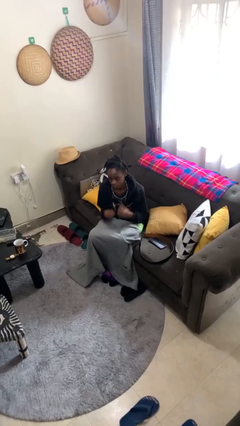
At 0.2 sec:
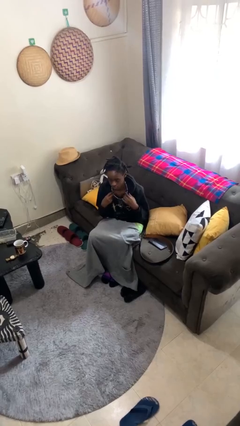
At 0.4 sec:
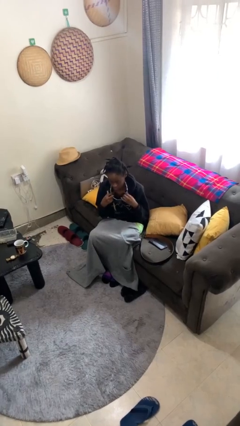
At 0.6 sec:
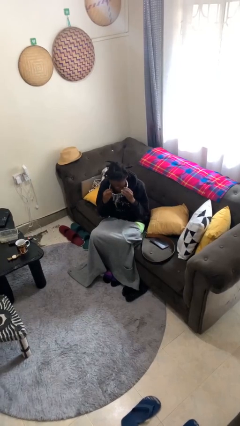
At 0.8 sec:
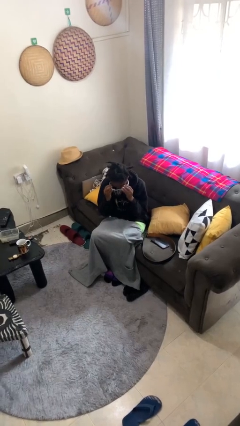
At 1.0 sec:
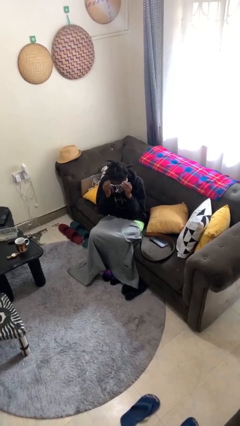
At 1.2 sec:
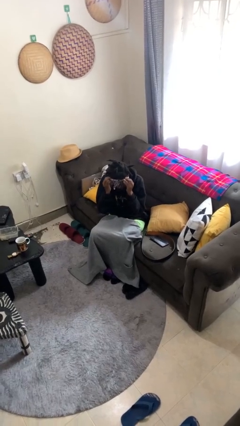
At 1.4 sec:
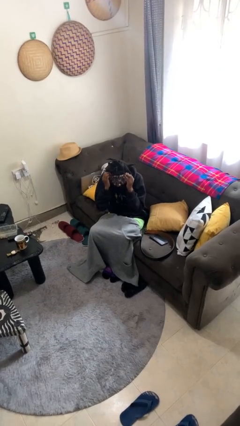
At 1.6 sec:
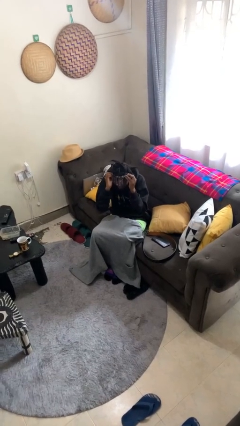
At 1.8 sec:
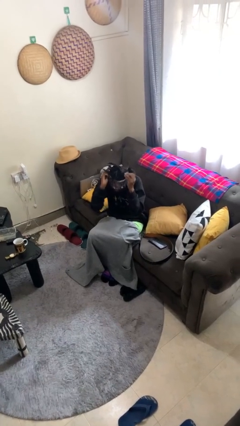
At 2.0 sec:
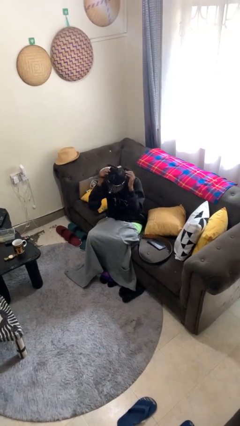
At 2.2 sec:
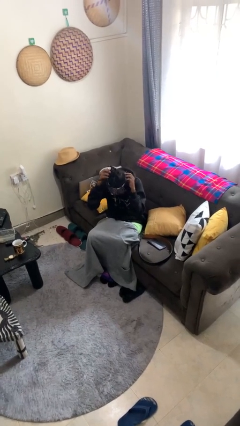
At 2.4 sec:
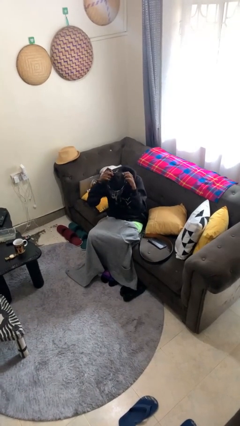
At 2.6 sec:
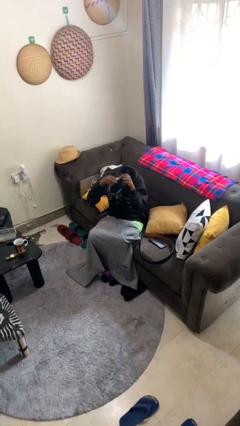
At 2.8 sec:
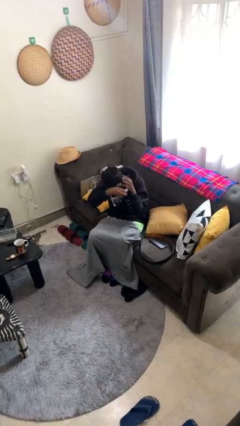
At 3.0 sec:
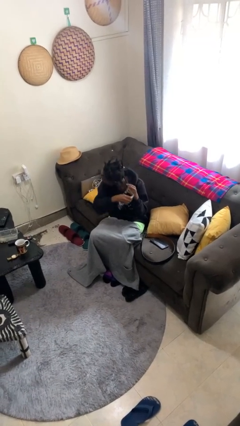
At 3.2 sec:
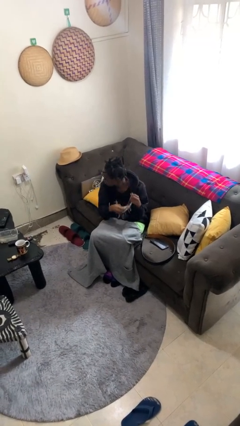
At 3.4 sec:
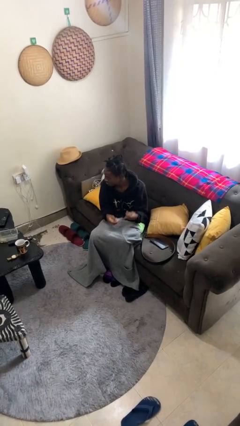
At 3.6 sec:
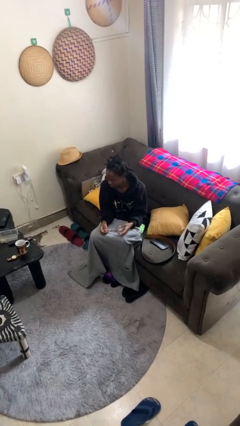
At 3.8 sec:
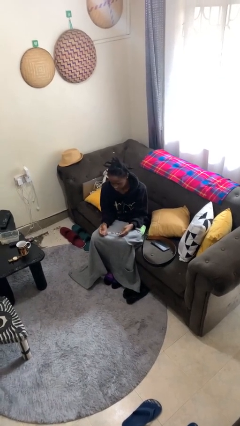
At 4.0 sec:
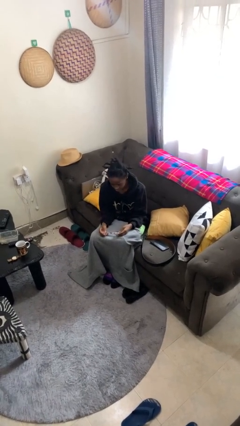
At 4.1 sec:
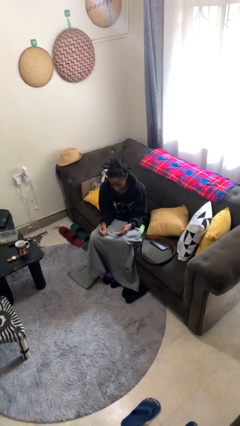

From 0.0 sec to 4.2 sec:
person takes off necklace

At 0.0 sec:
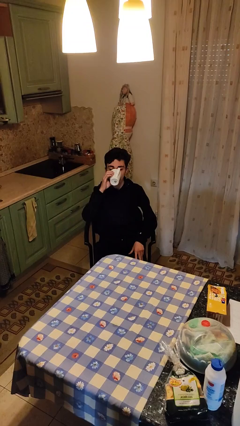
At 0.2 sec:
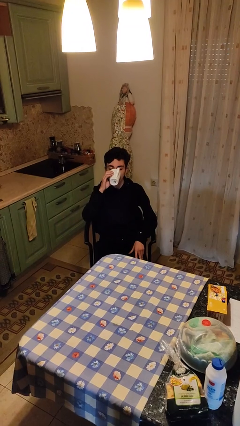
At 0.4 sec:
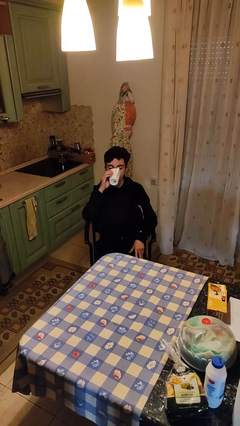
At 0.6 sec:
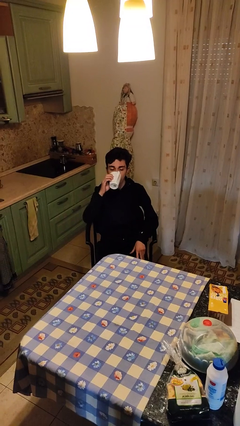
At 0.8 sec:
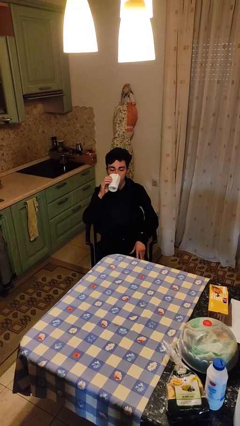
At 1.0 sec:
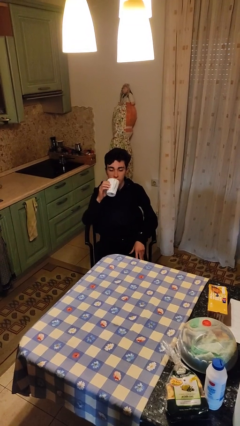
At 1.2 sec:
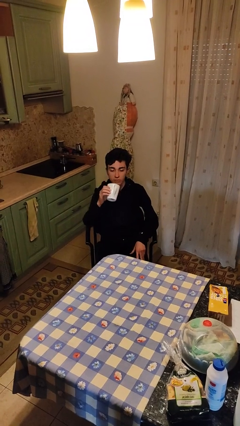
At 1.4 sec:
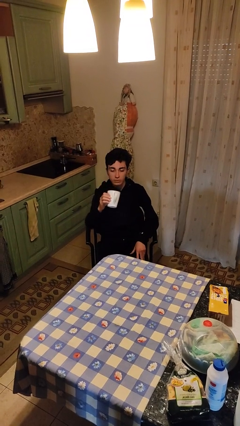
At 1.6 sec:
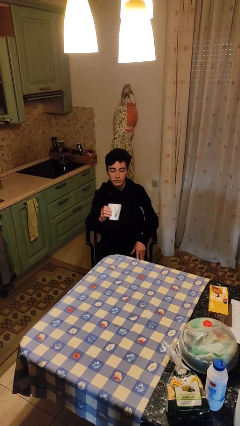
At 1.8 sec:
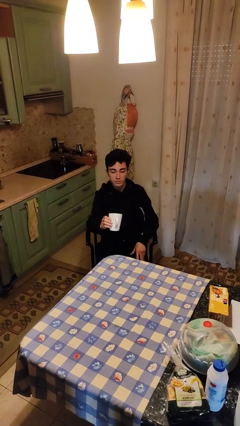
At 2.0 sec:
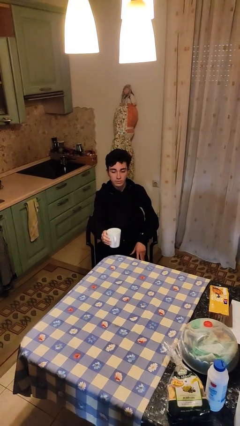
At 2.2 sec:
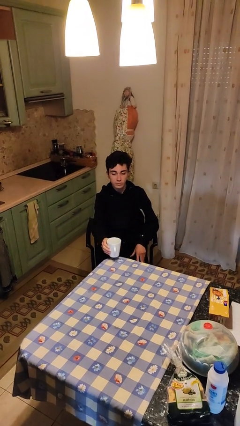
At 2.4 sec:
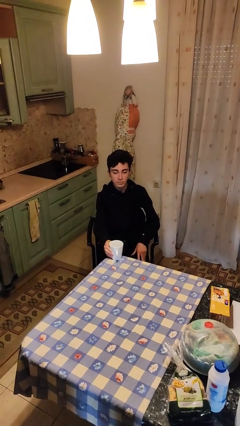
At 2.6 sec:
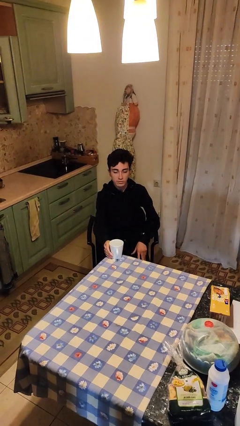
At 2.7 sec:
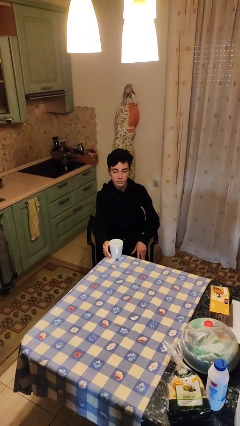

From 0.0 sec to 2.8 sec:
person puts down object on table

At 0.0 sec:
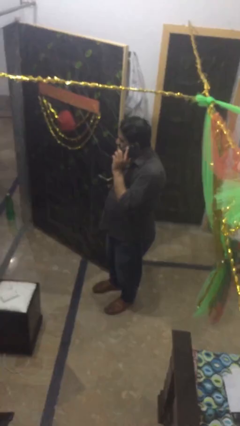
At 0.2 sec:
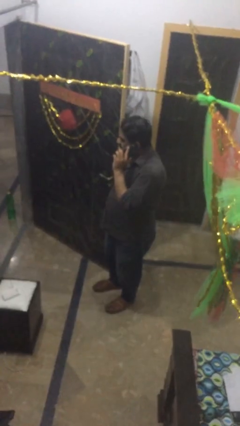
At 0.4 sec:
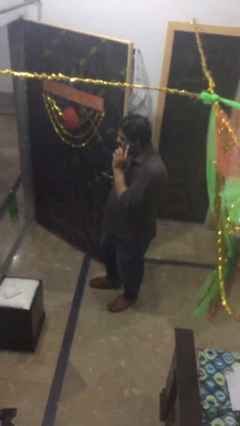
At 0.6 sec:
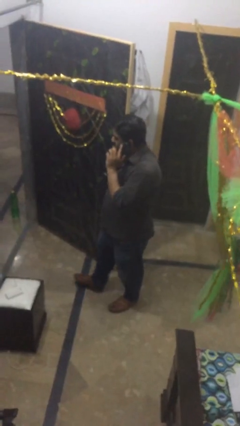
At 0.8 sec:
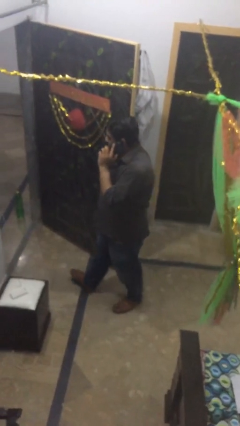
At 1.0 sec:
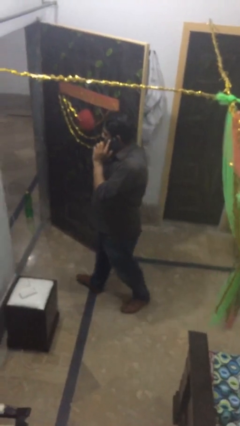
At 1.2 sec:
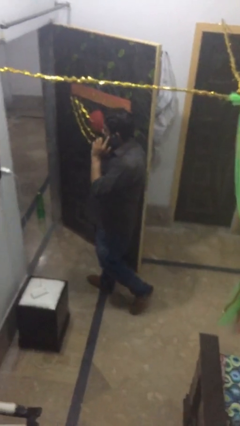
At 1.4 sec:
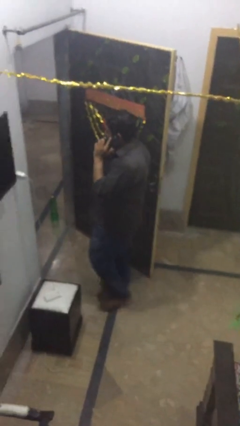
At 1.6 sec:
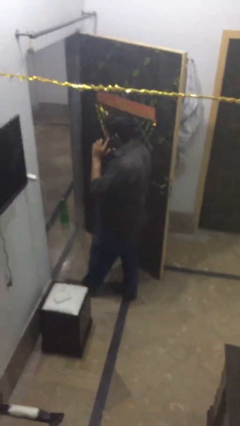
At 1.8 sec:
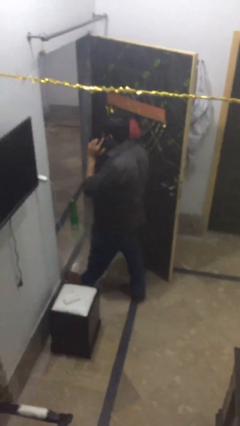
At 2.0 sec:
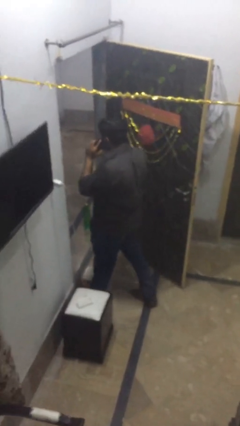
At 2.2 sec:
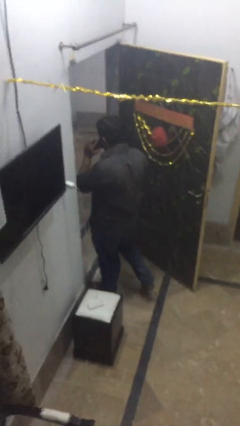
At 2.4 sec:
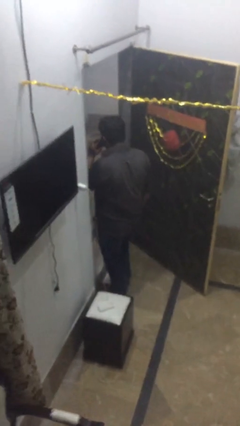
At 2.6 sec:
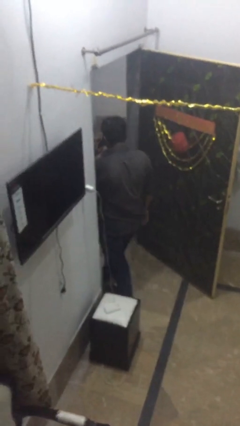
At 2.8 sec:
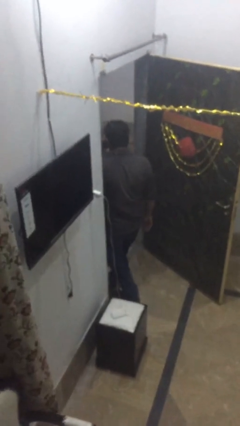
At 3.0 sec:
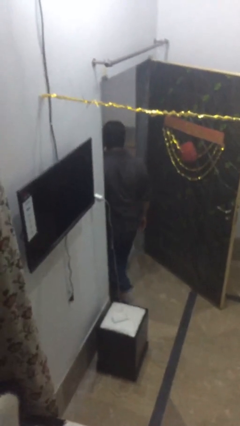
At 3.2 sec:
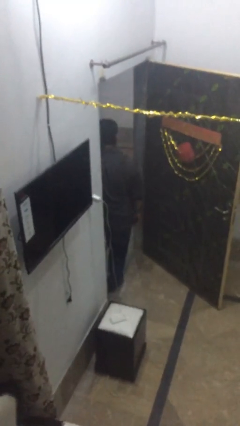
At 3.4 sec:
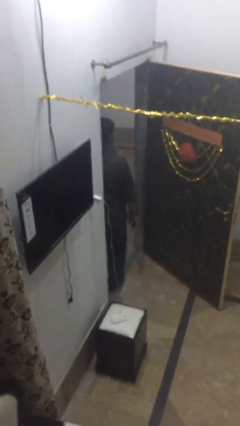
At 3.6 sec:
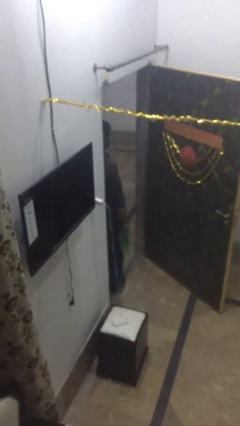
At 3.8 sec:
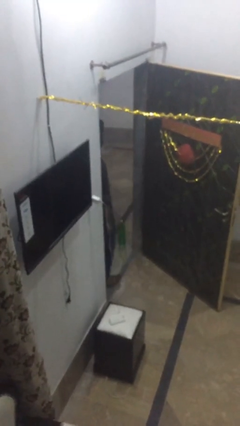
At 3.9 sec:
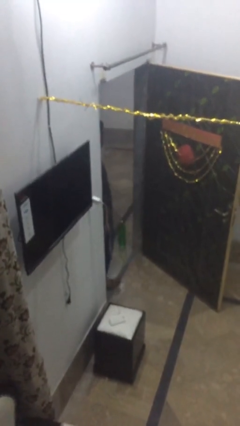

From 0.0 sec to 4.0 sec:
person exits scene through structure

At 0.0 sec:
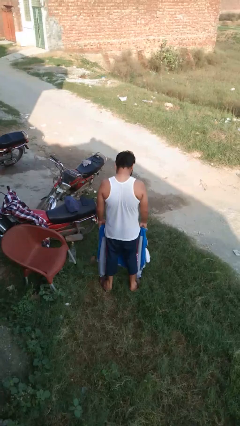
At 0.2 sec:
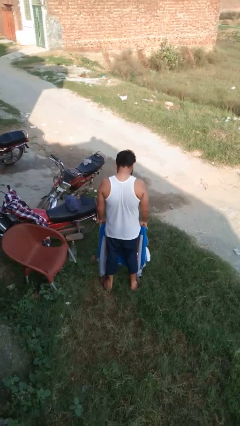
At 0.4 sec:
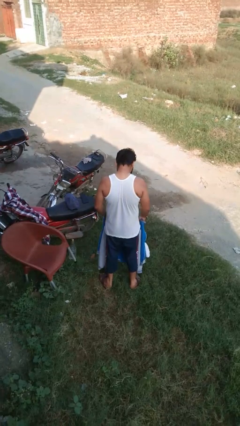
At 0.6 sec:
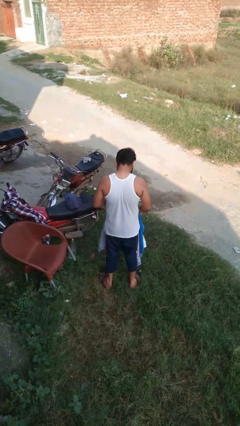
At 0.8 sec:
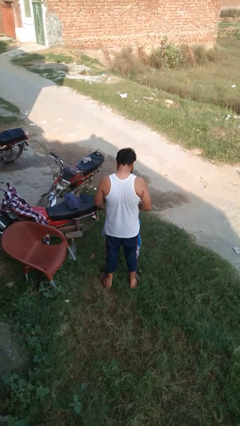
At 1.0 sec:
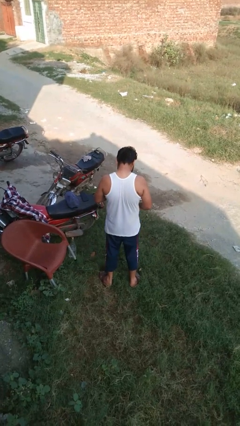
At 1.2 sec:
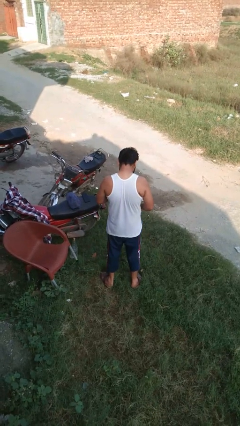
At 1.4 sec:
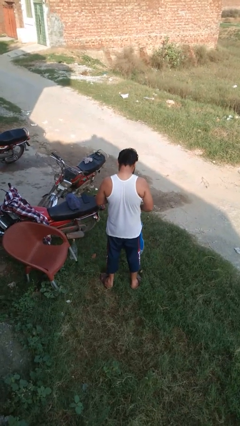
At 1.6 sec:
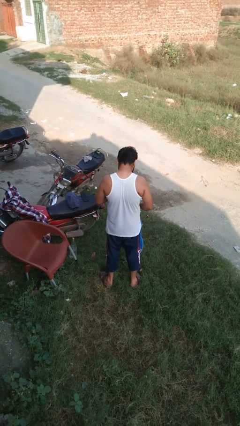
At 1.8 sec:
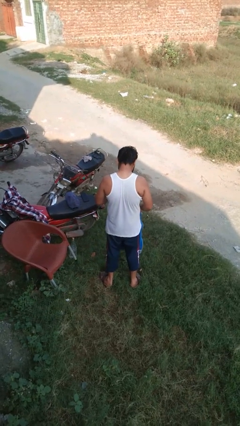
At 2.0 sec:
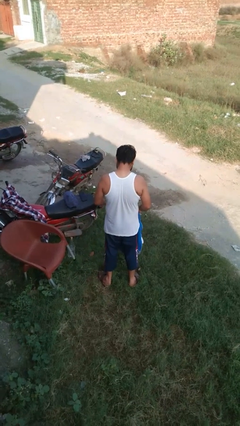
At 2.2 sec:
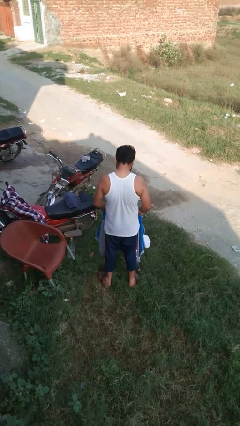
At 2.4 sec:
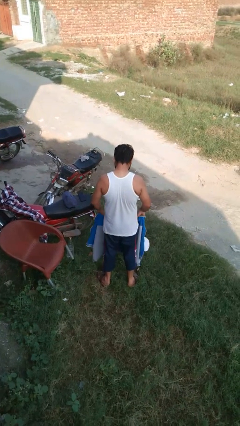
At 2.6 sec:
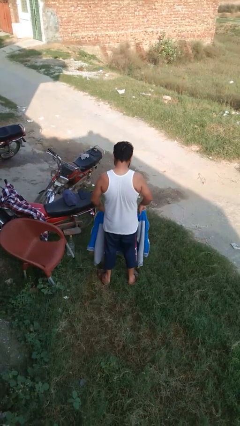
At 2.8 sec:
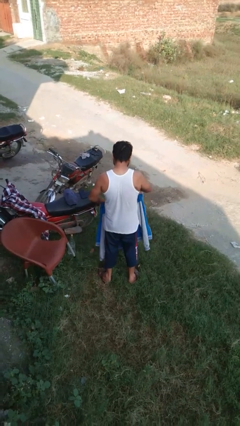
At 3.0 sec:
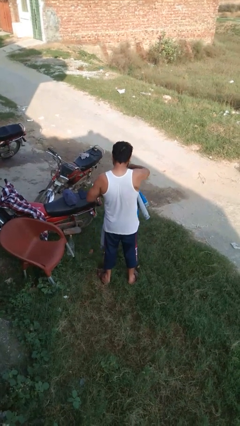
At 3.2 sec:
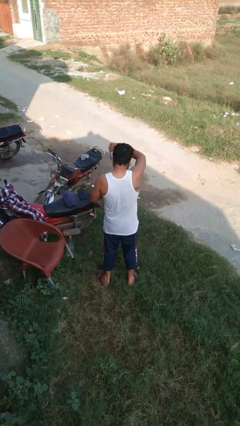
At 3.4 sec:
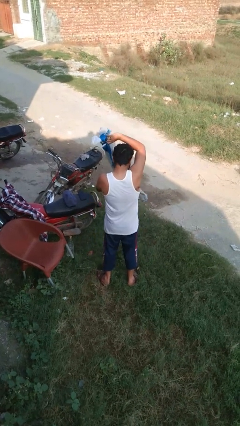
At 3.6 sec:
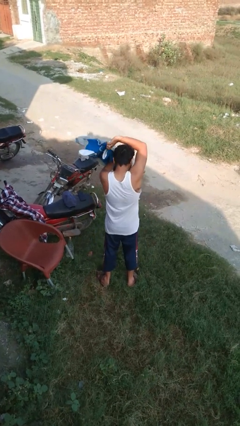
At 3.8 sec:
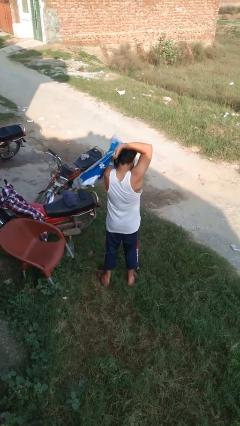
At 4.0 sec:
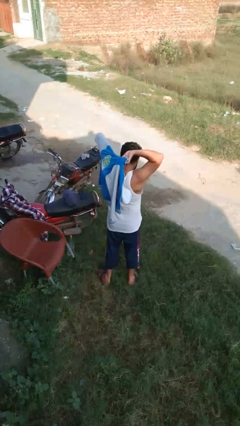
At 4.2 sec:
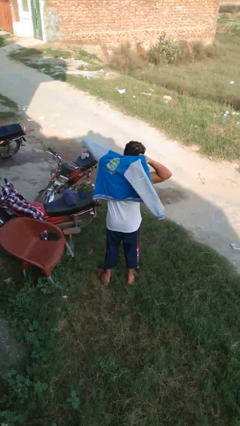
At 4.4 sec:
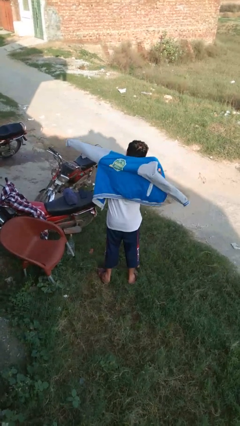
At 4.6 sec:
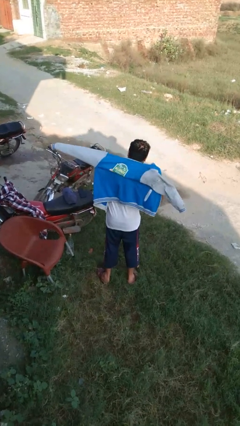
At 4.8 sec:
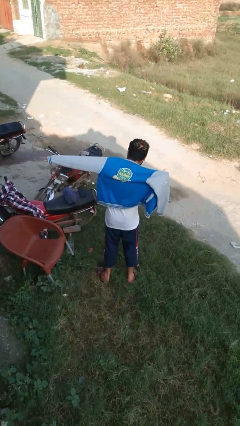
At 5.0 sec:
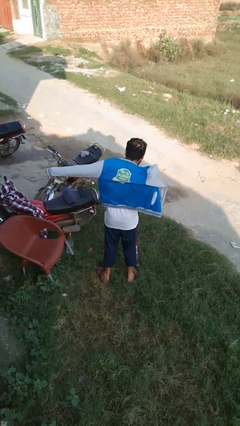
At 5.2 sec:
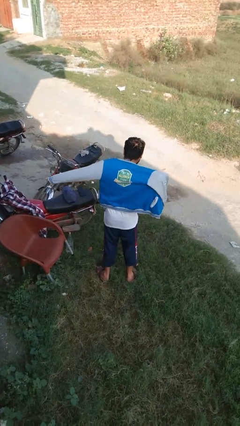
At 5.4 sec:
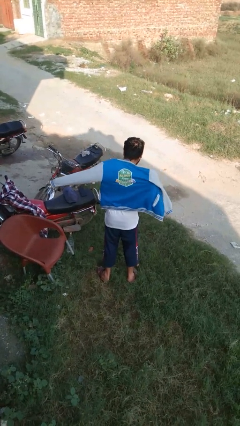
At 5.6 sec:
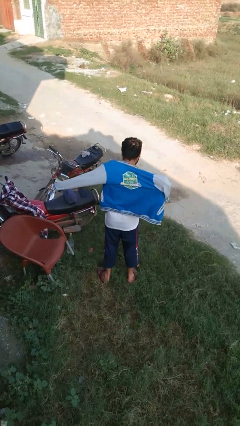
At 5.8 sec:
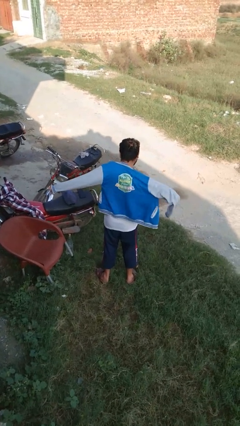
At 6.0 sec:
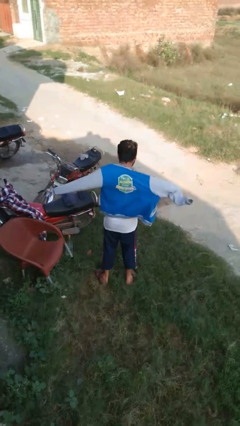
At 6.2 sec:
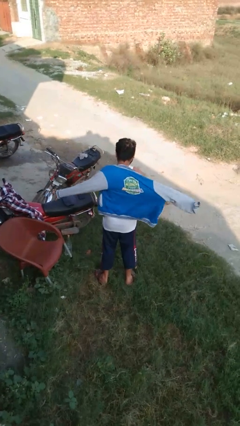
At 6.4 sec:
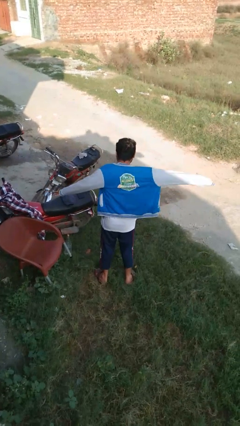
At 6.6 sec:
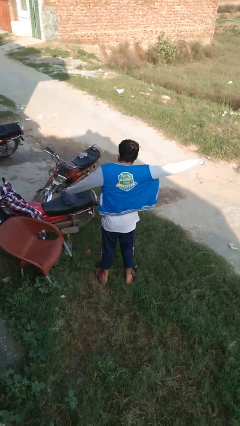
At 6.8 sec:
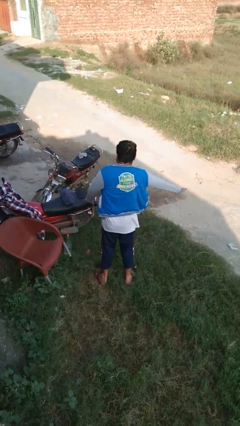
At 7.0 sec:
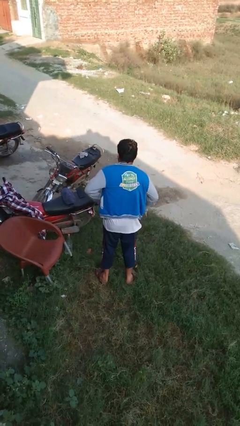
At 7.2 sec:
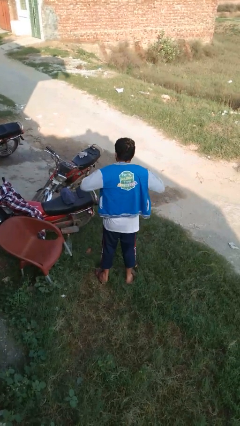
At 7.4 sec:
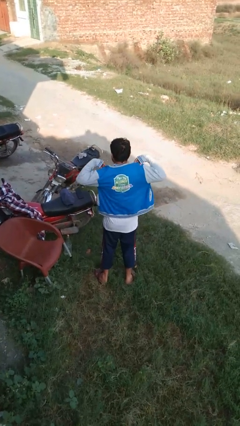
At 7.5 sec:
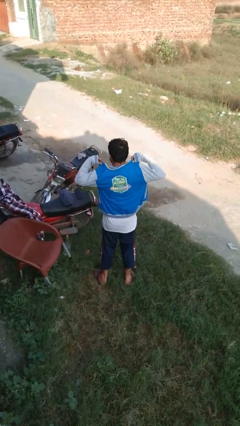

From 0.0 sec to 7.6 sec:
person puts on jacket
